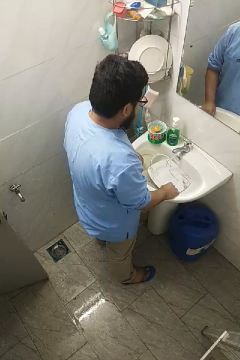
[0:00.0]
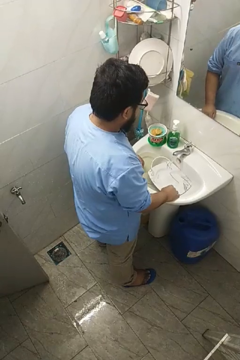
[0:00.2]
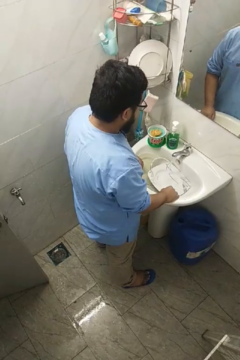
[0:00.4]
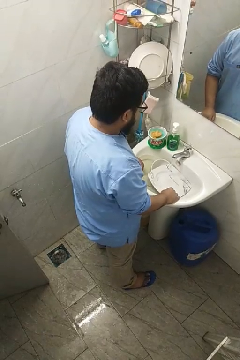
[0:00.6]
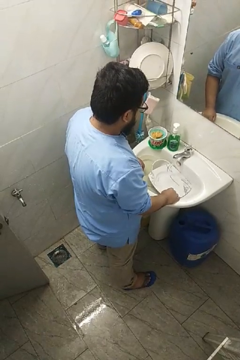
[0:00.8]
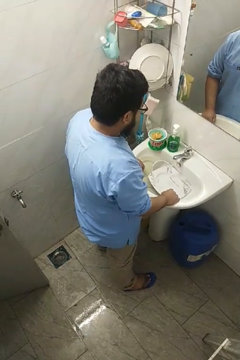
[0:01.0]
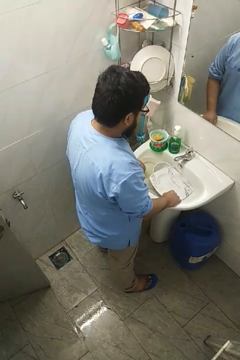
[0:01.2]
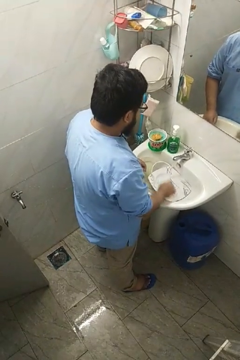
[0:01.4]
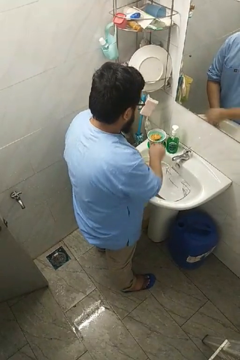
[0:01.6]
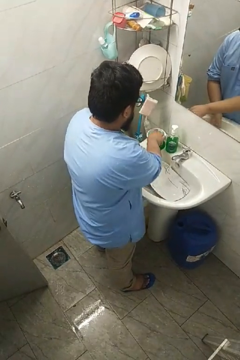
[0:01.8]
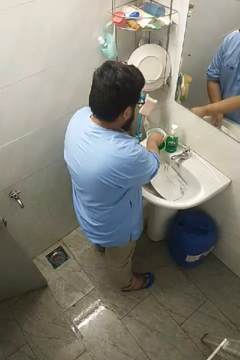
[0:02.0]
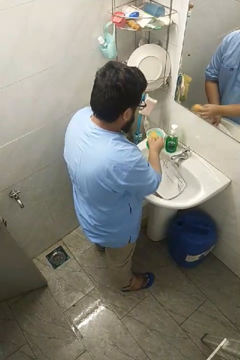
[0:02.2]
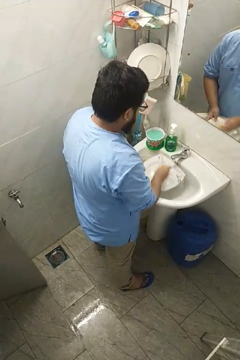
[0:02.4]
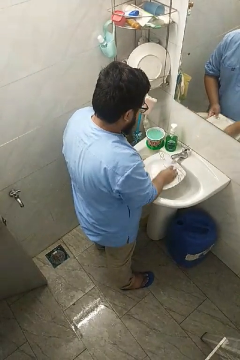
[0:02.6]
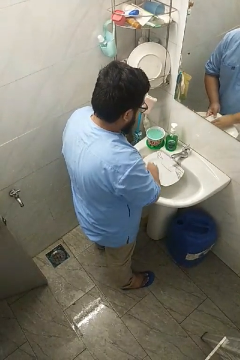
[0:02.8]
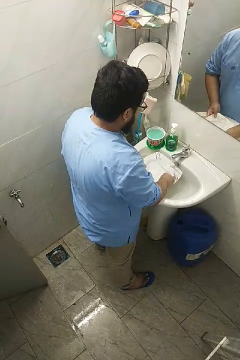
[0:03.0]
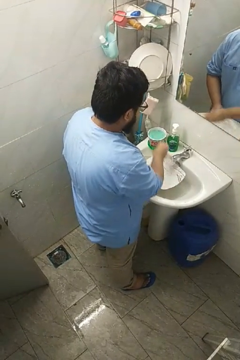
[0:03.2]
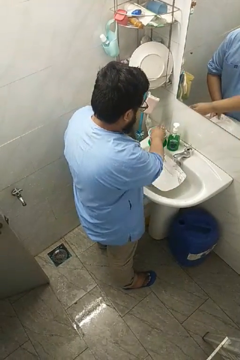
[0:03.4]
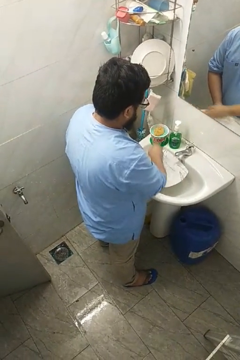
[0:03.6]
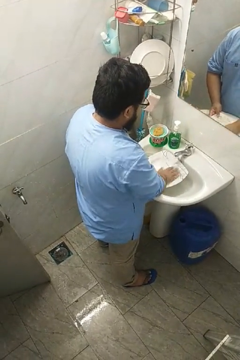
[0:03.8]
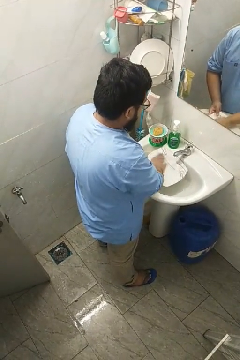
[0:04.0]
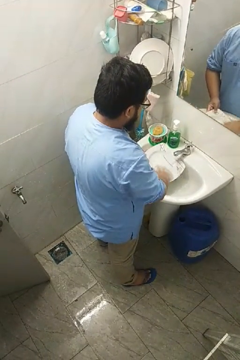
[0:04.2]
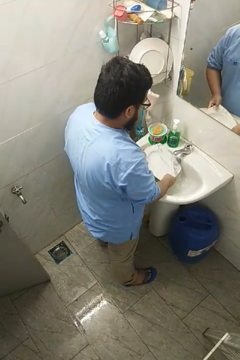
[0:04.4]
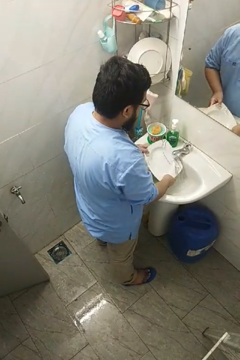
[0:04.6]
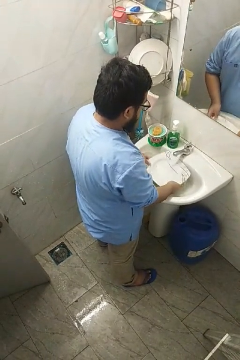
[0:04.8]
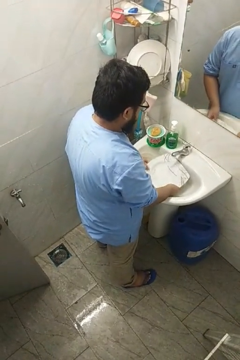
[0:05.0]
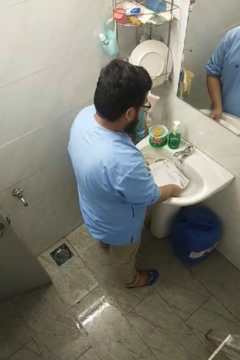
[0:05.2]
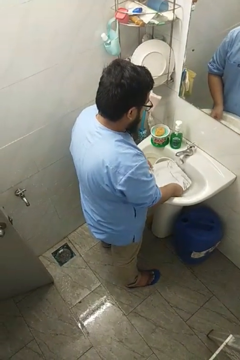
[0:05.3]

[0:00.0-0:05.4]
person washes dish

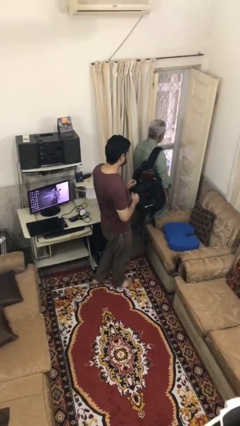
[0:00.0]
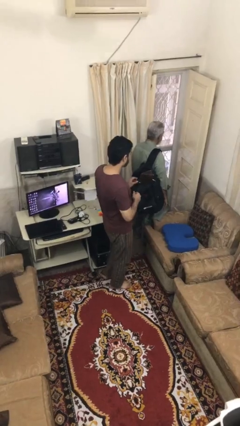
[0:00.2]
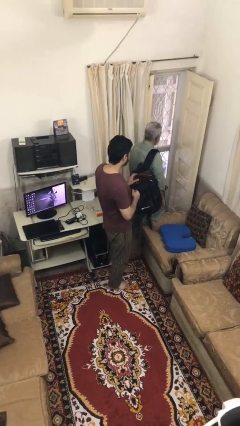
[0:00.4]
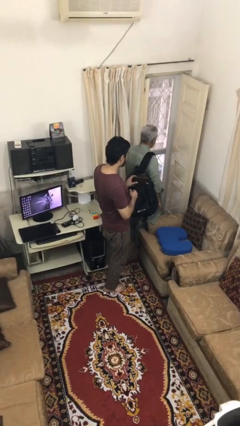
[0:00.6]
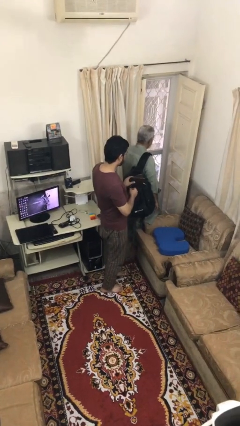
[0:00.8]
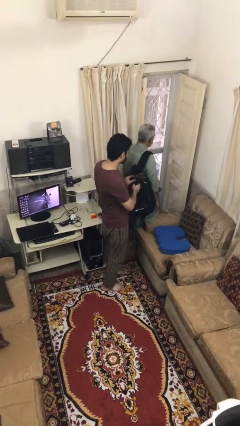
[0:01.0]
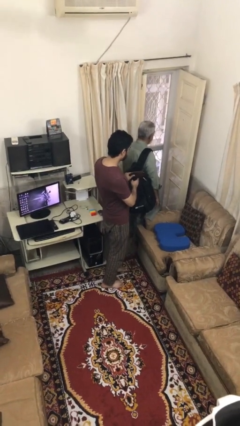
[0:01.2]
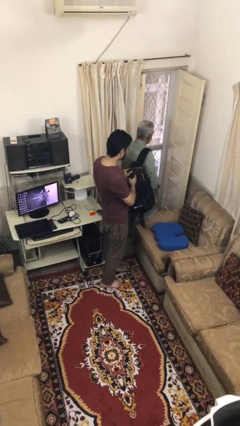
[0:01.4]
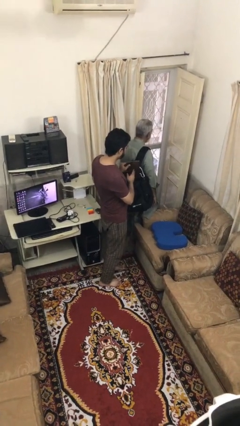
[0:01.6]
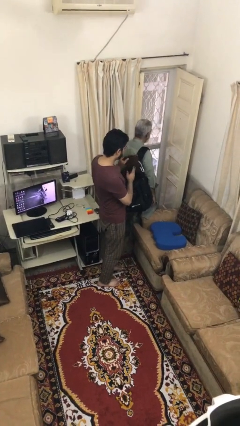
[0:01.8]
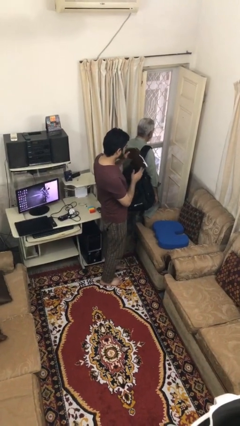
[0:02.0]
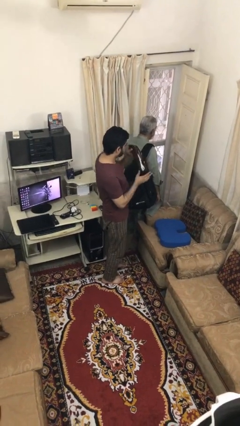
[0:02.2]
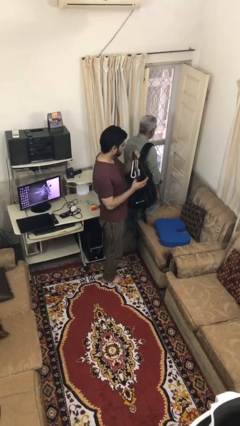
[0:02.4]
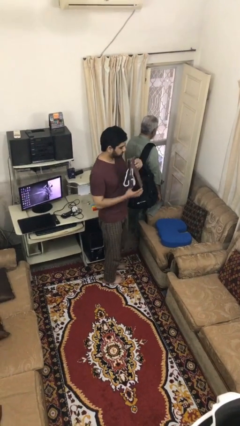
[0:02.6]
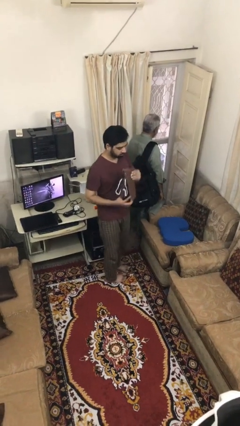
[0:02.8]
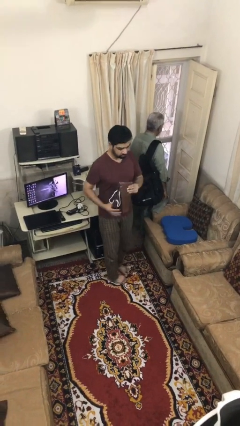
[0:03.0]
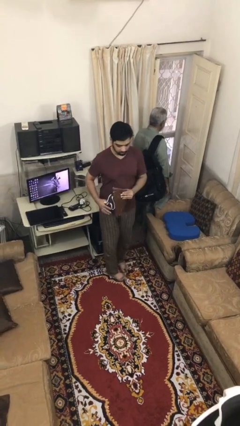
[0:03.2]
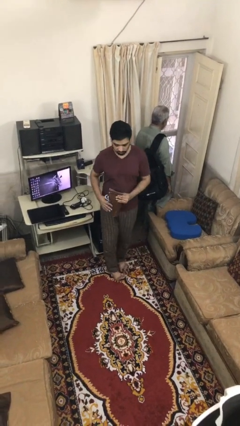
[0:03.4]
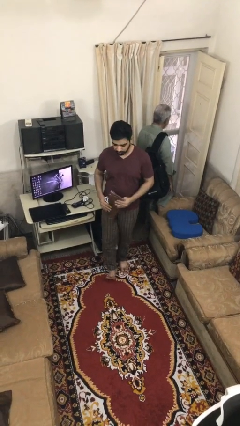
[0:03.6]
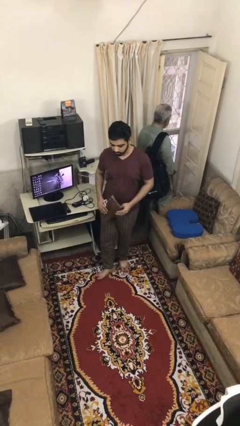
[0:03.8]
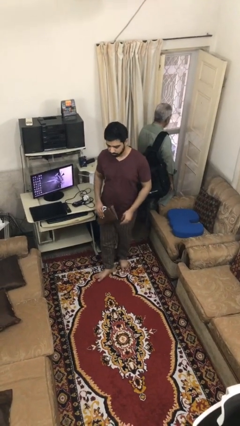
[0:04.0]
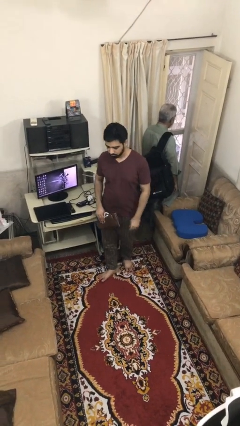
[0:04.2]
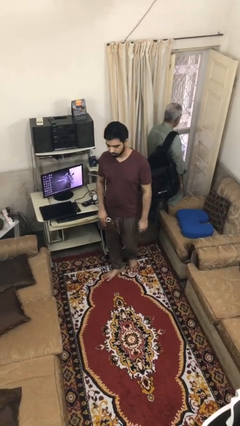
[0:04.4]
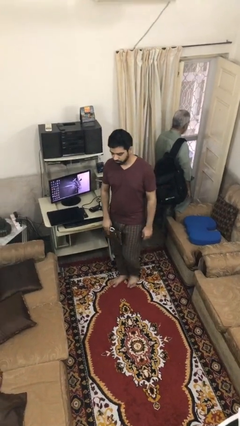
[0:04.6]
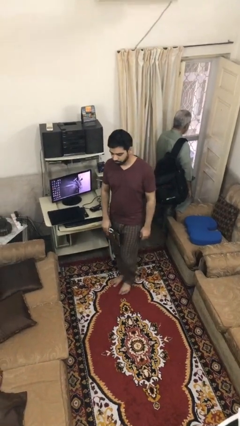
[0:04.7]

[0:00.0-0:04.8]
person steals object from person

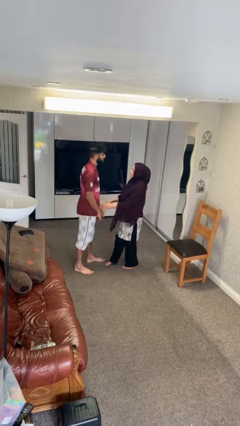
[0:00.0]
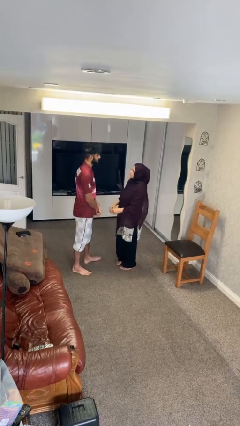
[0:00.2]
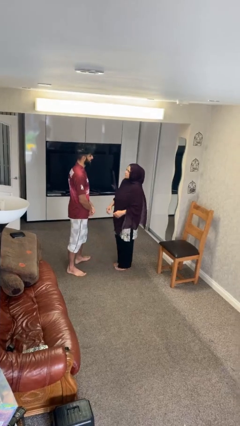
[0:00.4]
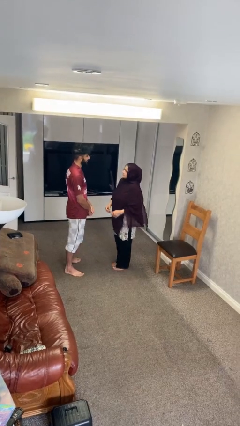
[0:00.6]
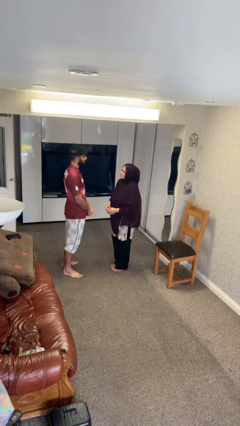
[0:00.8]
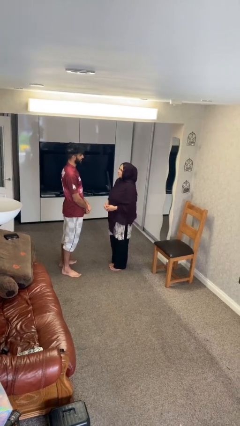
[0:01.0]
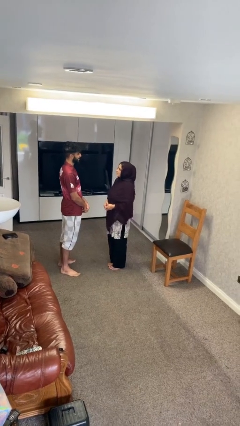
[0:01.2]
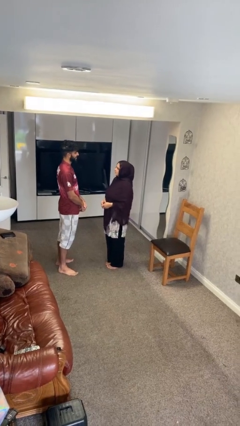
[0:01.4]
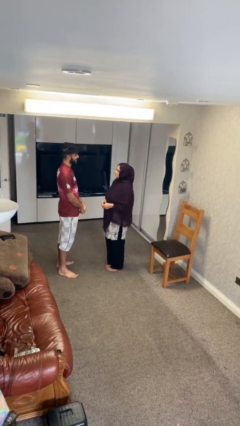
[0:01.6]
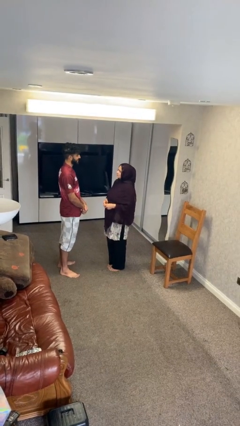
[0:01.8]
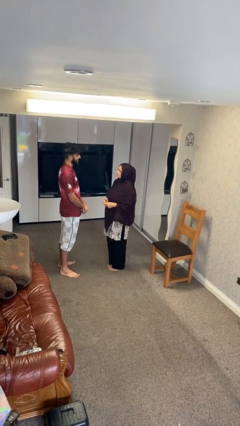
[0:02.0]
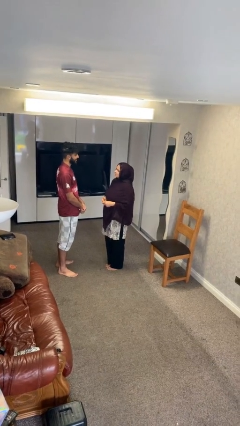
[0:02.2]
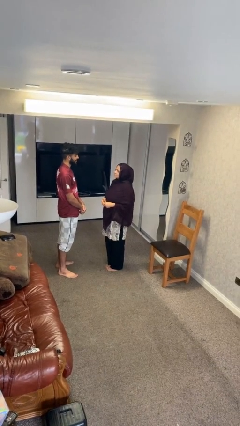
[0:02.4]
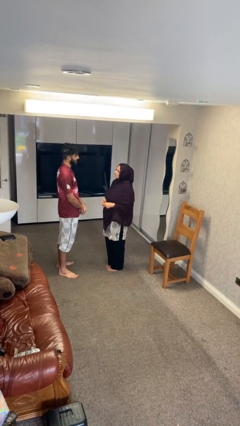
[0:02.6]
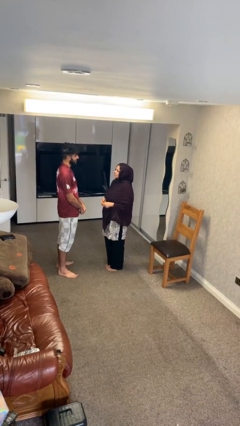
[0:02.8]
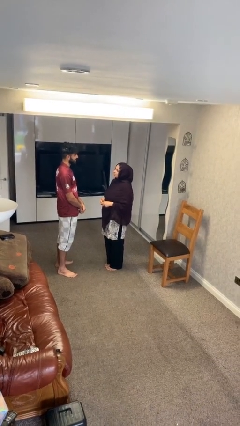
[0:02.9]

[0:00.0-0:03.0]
person talks to person

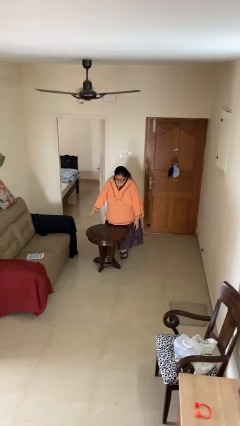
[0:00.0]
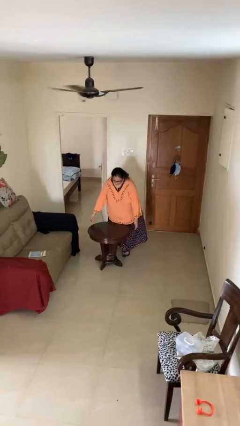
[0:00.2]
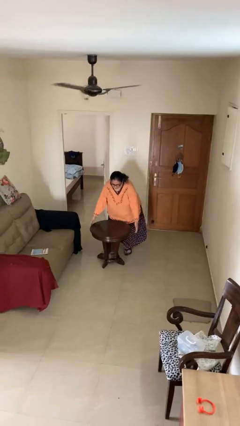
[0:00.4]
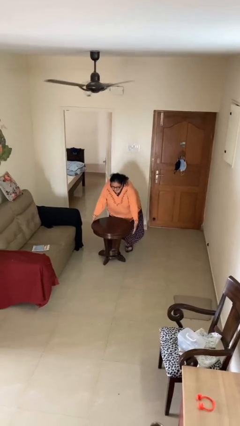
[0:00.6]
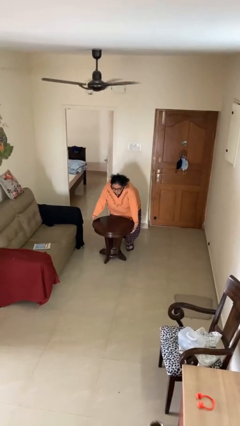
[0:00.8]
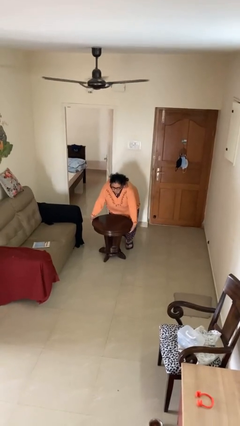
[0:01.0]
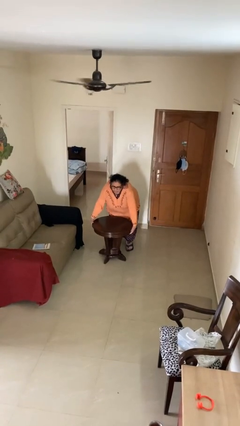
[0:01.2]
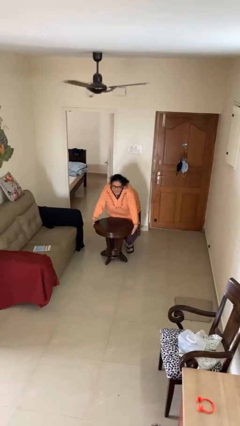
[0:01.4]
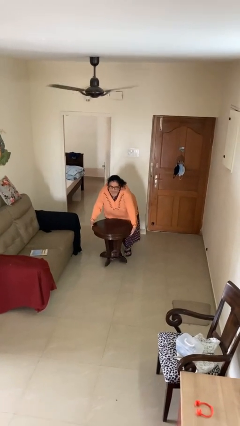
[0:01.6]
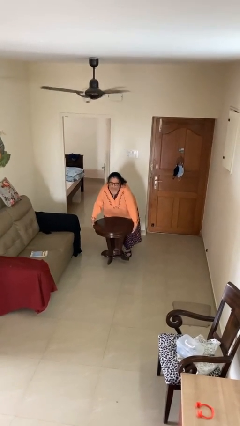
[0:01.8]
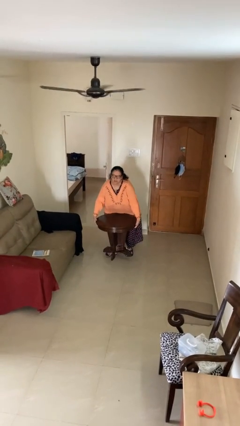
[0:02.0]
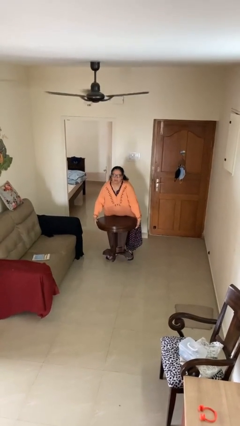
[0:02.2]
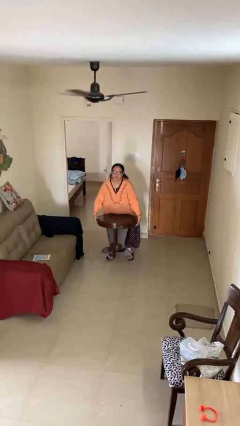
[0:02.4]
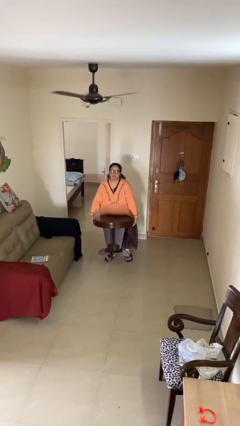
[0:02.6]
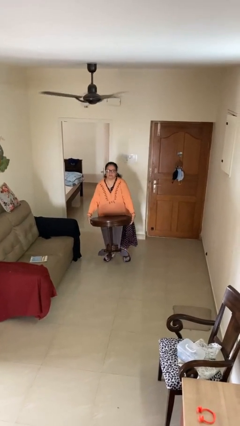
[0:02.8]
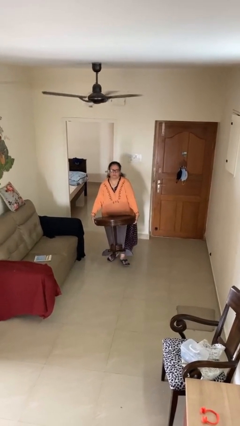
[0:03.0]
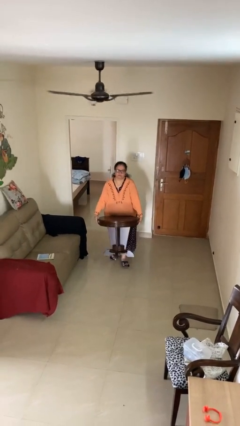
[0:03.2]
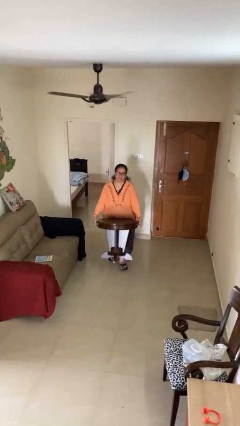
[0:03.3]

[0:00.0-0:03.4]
person picks up object from floor

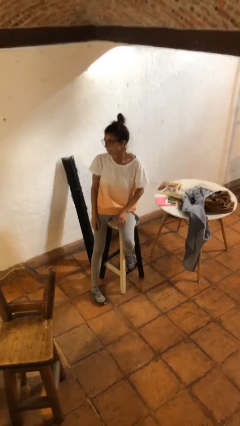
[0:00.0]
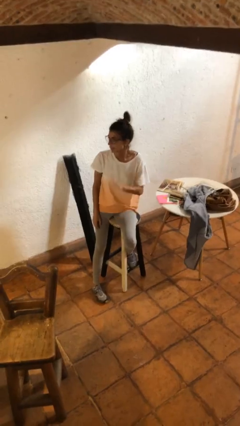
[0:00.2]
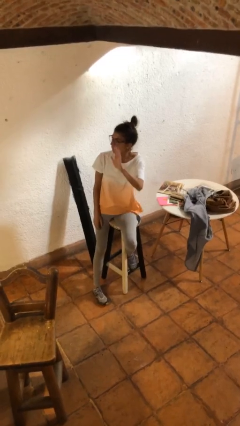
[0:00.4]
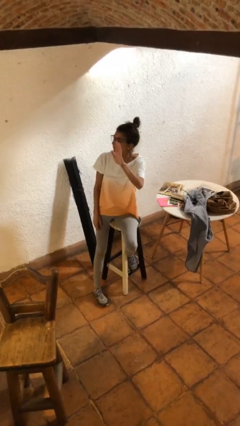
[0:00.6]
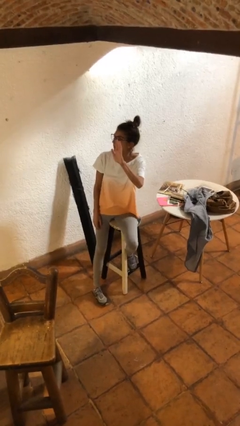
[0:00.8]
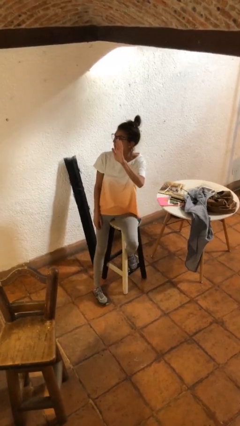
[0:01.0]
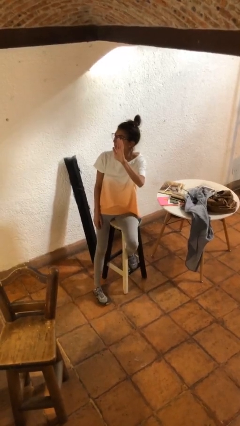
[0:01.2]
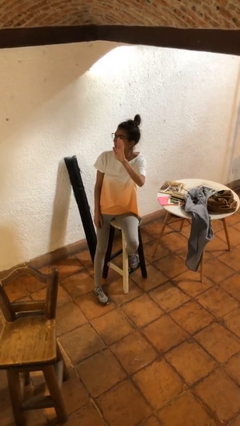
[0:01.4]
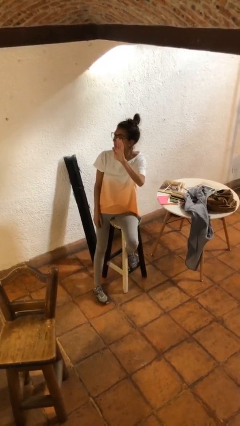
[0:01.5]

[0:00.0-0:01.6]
person gestures raise hand

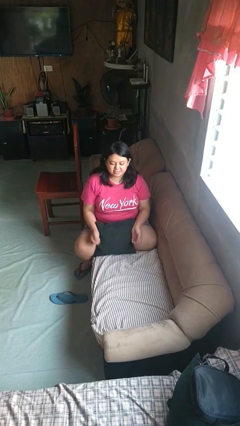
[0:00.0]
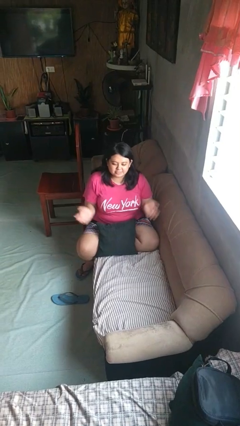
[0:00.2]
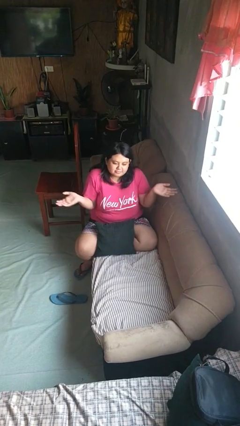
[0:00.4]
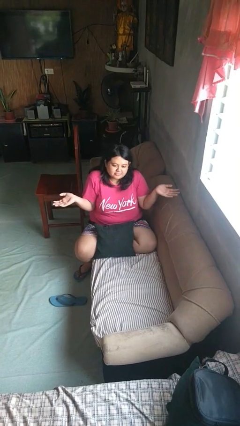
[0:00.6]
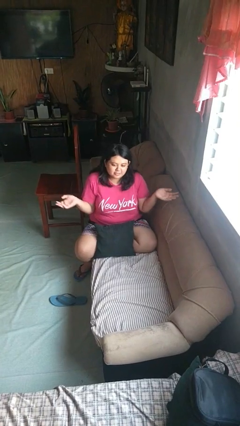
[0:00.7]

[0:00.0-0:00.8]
person shrugs
